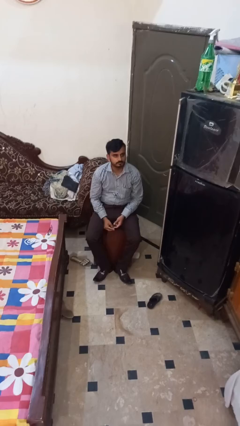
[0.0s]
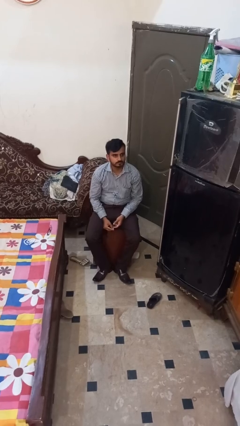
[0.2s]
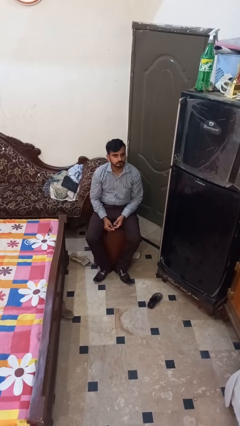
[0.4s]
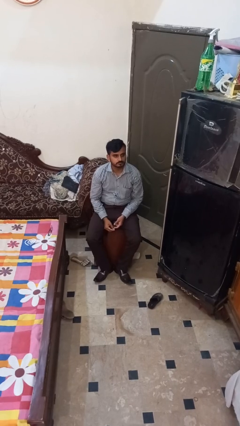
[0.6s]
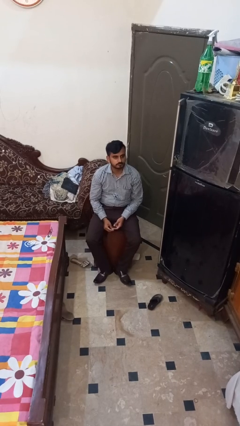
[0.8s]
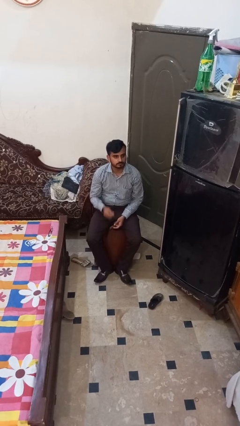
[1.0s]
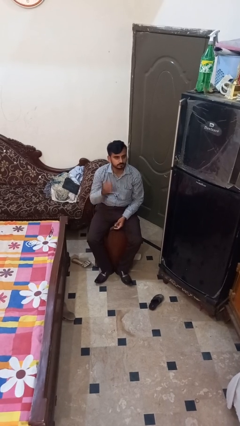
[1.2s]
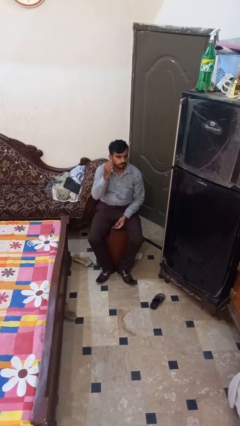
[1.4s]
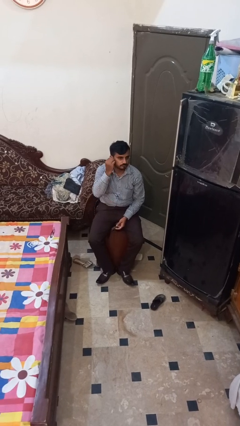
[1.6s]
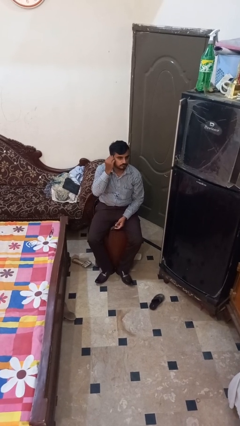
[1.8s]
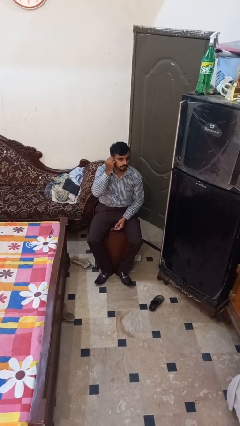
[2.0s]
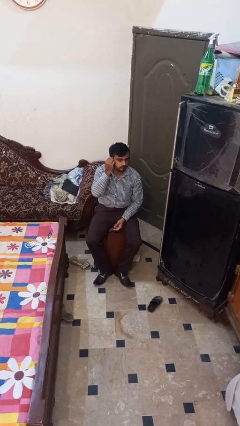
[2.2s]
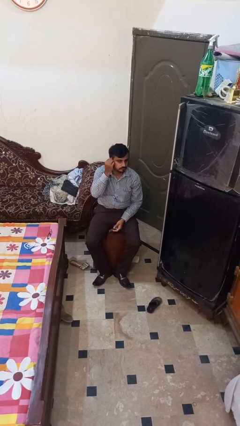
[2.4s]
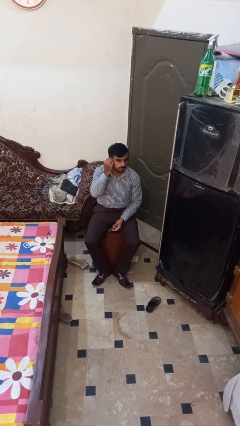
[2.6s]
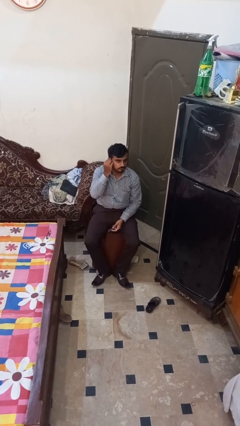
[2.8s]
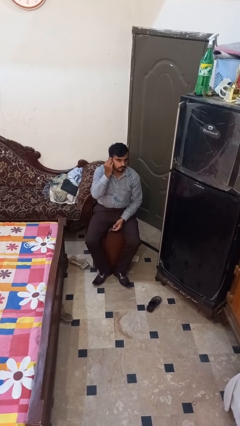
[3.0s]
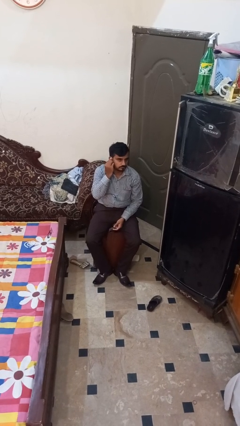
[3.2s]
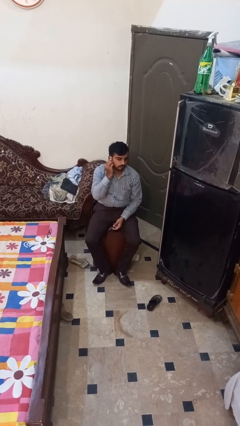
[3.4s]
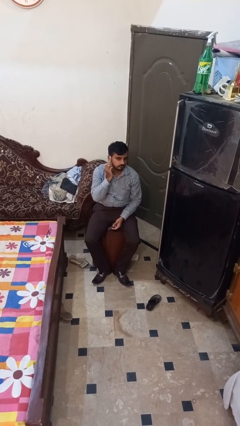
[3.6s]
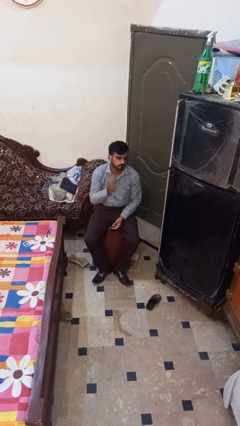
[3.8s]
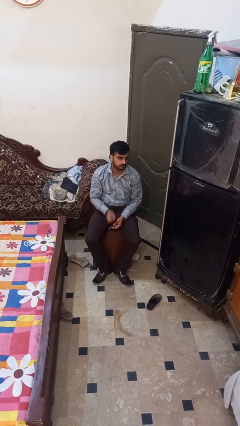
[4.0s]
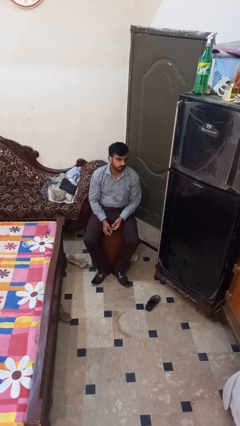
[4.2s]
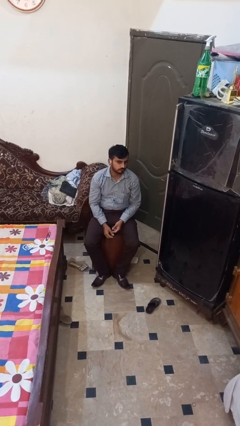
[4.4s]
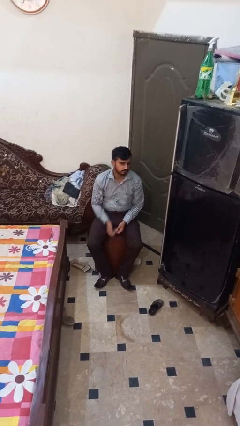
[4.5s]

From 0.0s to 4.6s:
person puts on earrings

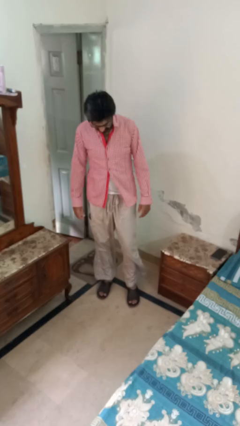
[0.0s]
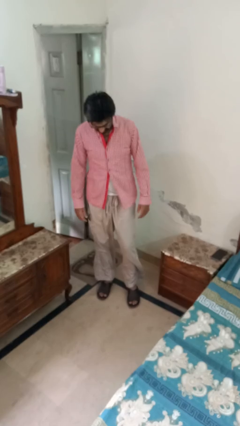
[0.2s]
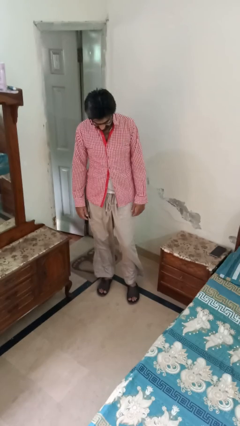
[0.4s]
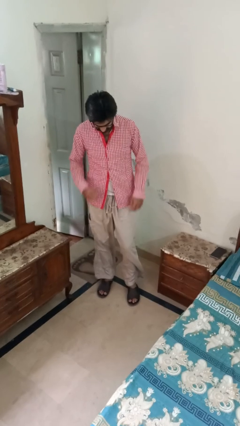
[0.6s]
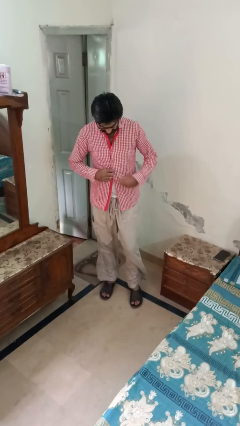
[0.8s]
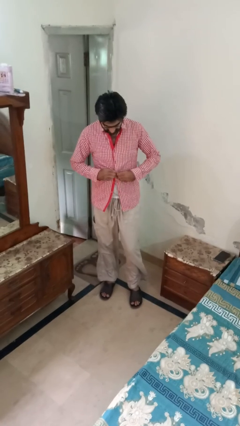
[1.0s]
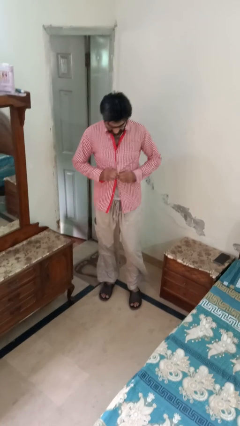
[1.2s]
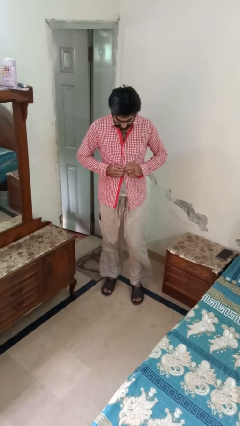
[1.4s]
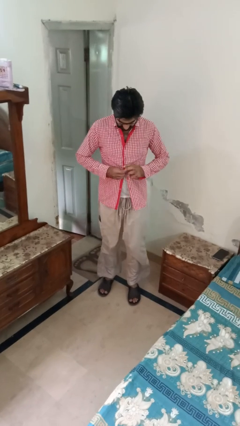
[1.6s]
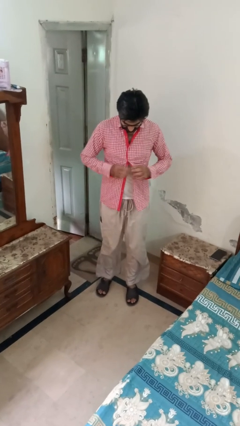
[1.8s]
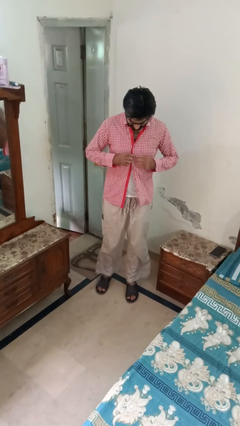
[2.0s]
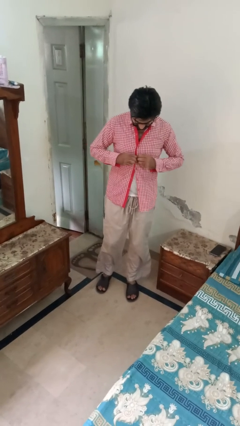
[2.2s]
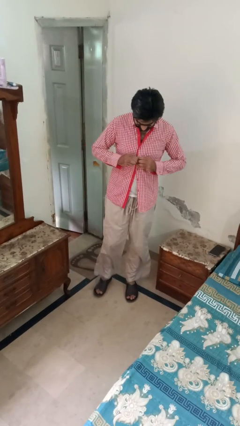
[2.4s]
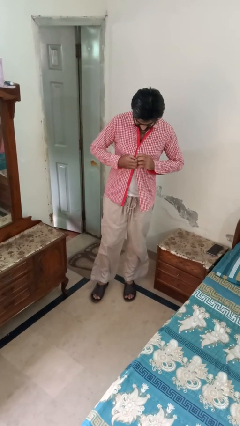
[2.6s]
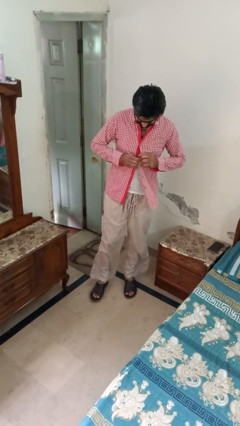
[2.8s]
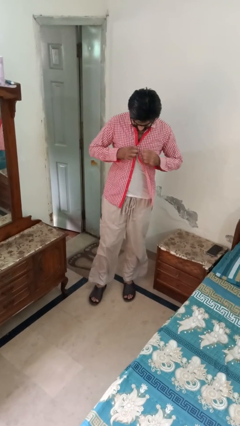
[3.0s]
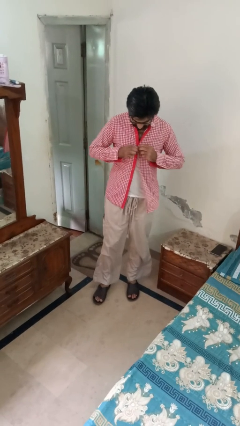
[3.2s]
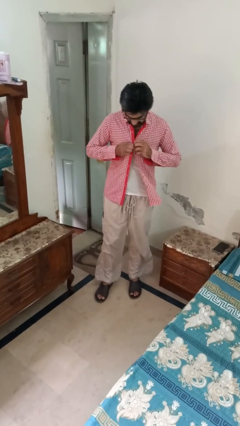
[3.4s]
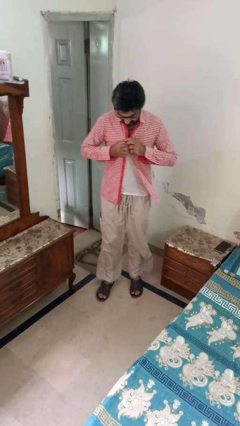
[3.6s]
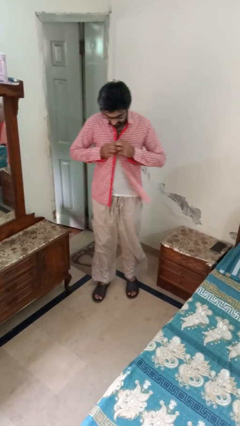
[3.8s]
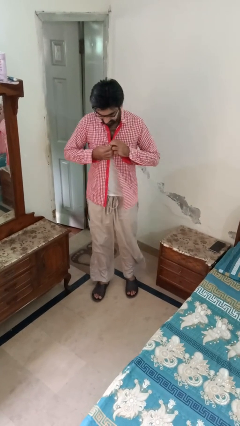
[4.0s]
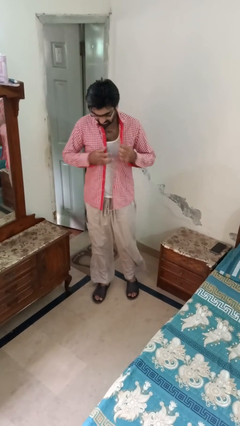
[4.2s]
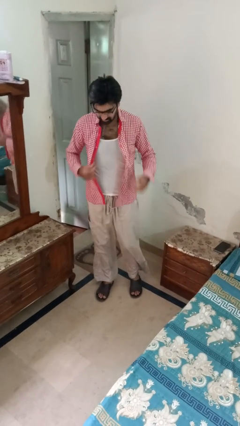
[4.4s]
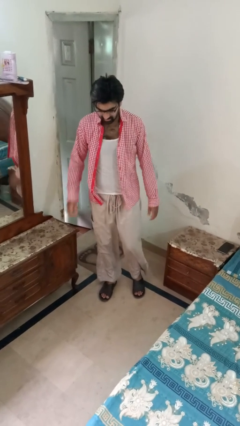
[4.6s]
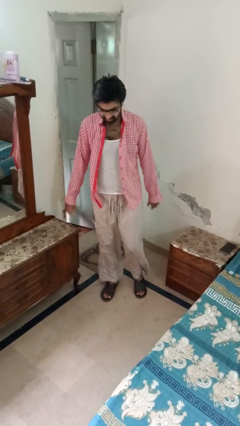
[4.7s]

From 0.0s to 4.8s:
person unbuttons shirt

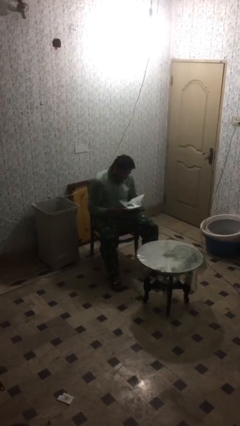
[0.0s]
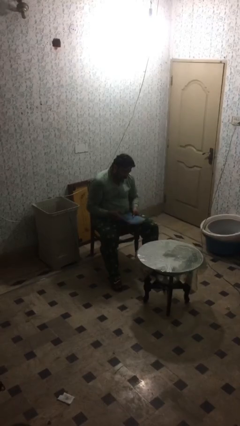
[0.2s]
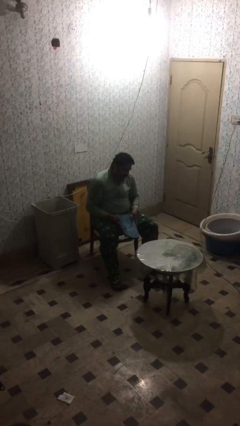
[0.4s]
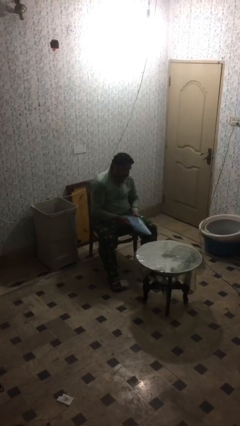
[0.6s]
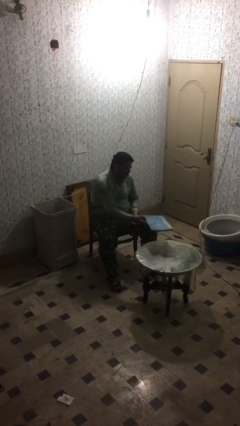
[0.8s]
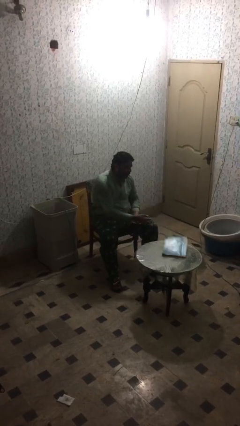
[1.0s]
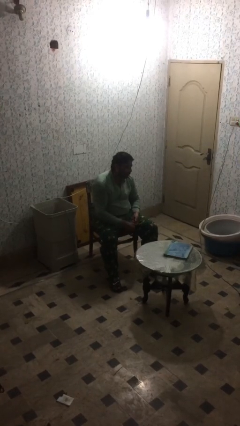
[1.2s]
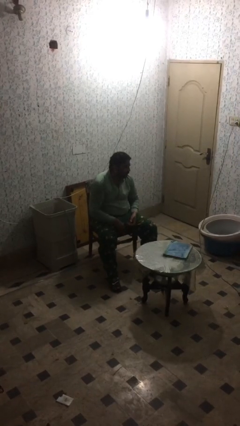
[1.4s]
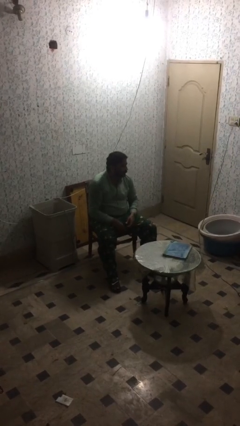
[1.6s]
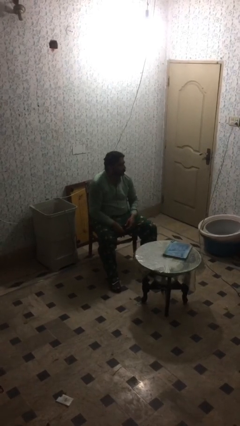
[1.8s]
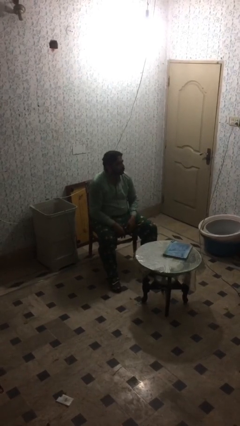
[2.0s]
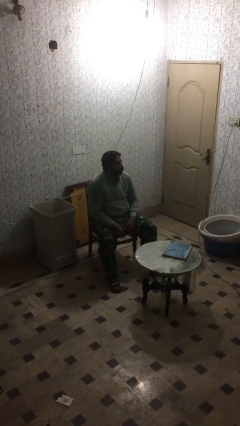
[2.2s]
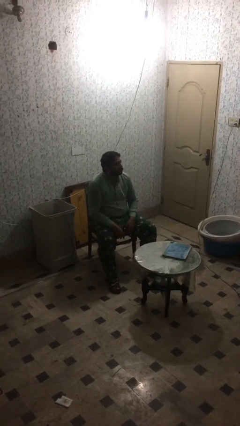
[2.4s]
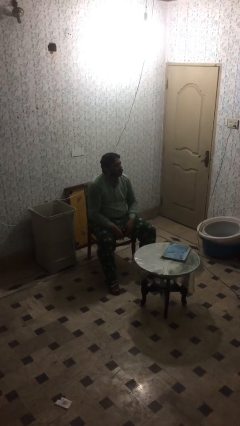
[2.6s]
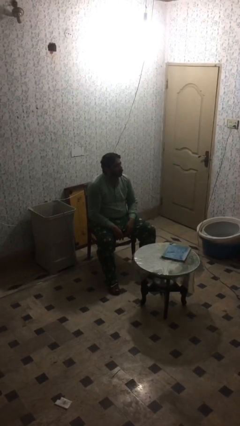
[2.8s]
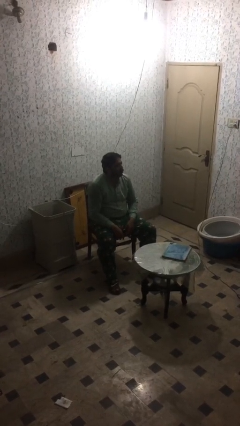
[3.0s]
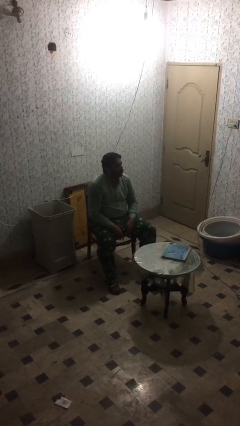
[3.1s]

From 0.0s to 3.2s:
person puts down object on table

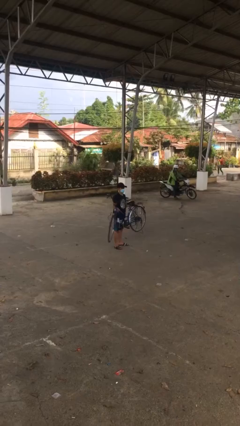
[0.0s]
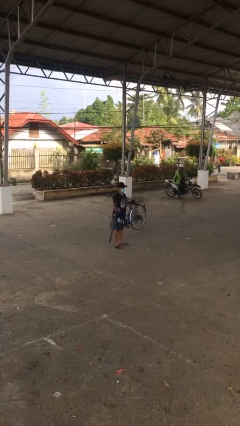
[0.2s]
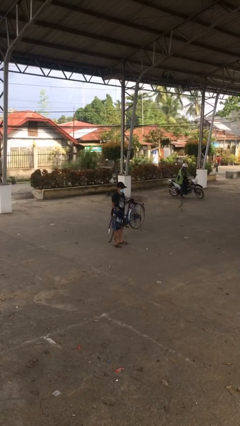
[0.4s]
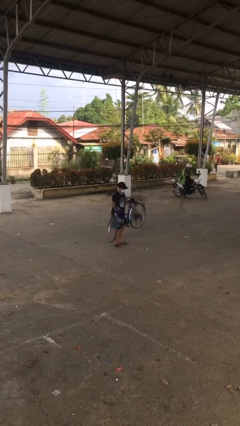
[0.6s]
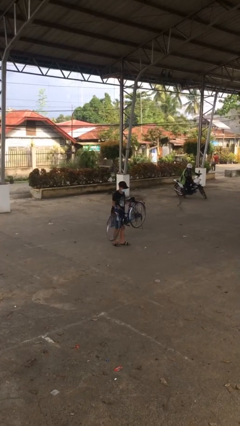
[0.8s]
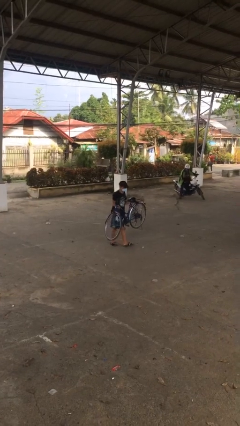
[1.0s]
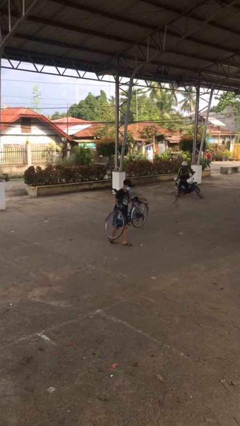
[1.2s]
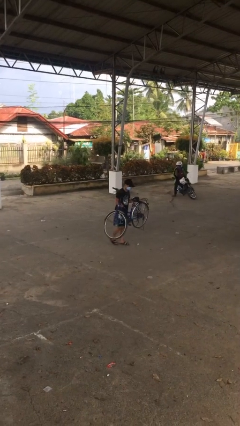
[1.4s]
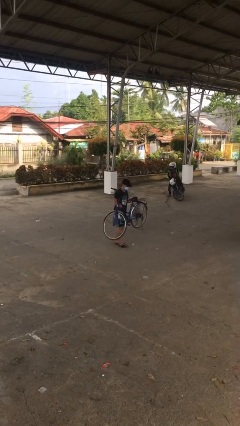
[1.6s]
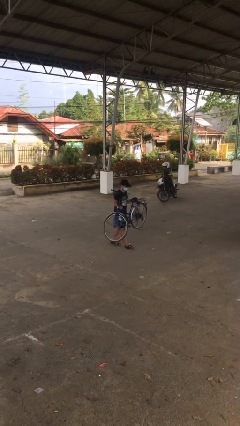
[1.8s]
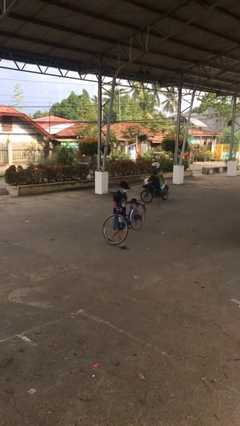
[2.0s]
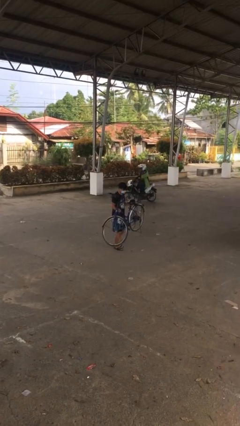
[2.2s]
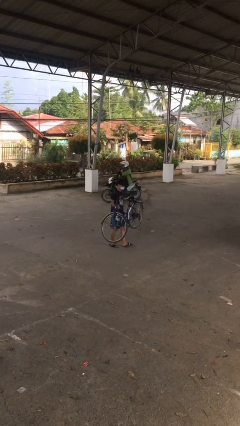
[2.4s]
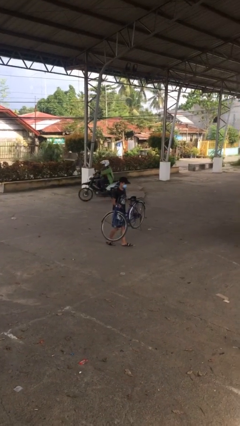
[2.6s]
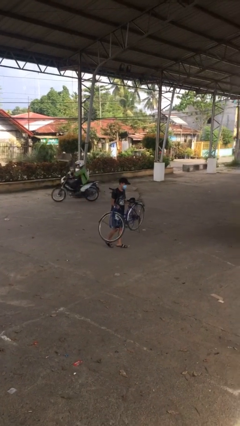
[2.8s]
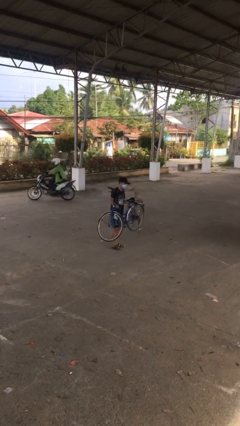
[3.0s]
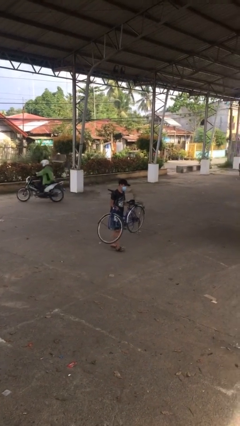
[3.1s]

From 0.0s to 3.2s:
person carries heavy object

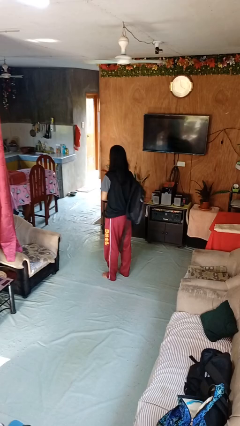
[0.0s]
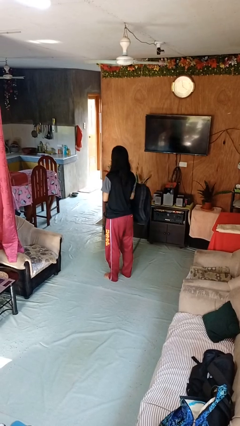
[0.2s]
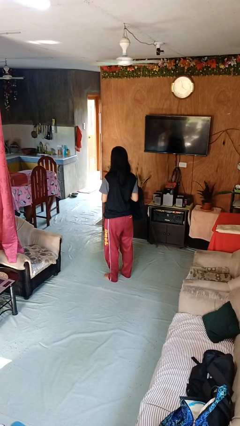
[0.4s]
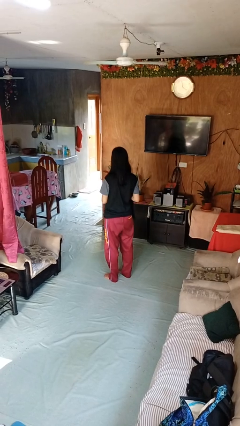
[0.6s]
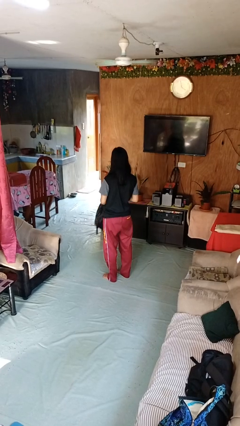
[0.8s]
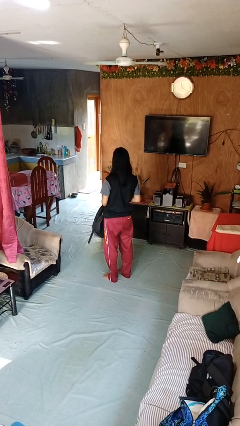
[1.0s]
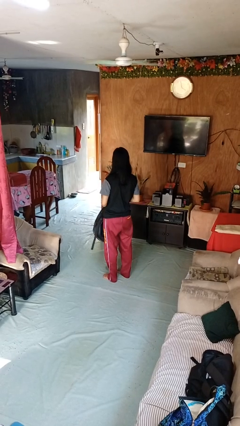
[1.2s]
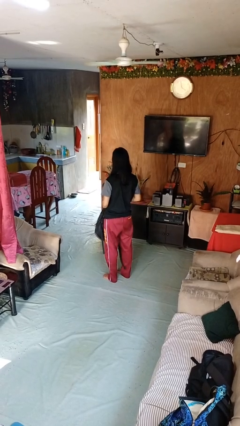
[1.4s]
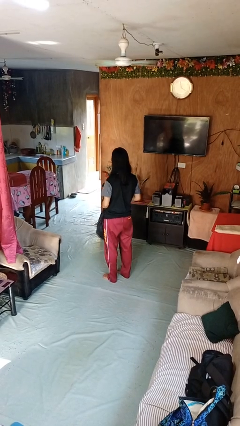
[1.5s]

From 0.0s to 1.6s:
person takes off backpack
